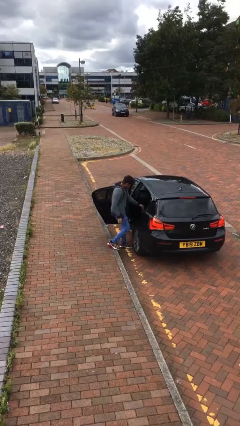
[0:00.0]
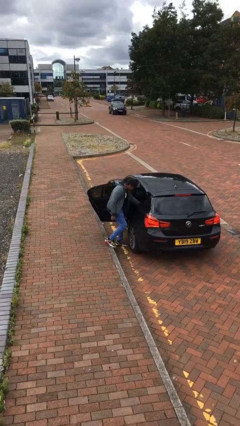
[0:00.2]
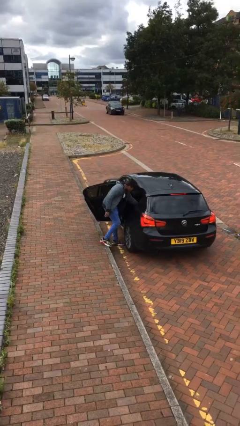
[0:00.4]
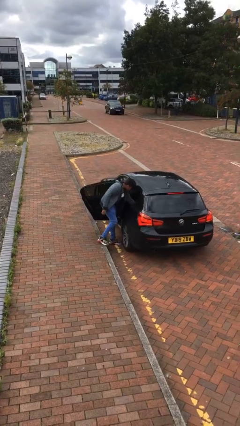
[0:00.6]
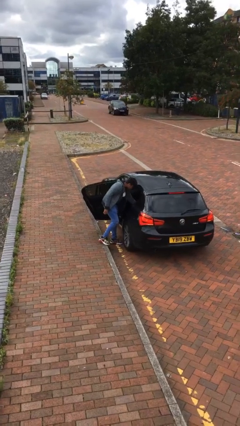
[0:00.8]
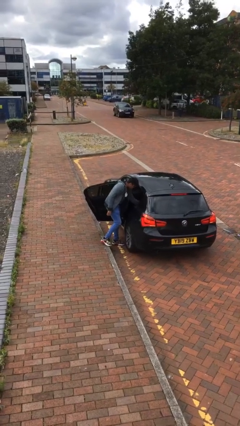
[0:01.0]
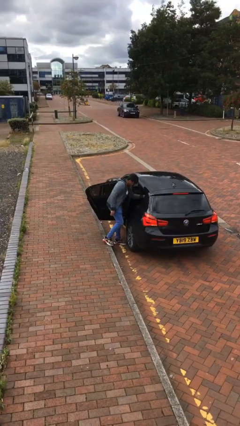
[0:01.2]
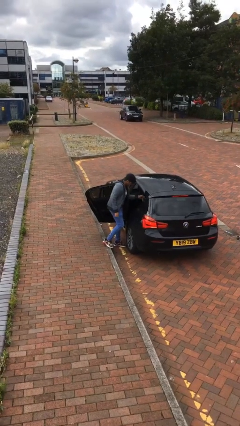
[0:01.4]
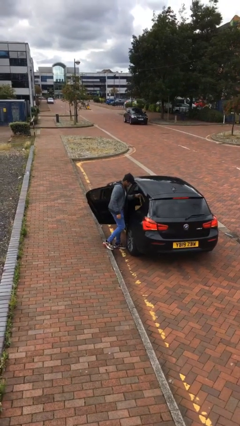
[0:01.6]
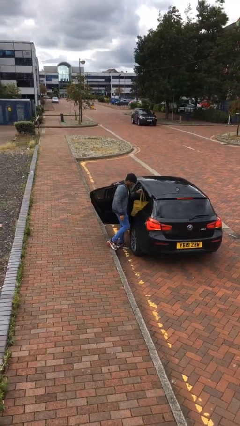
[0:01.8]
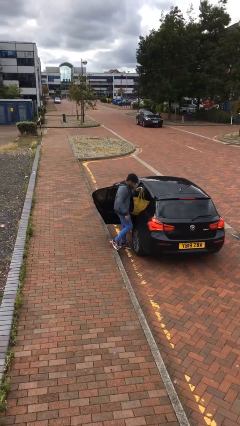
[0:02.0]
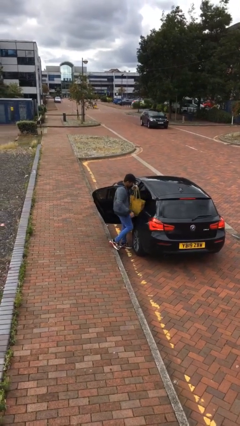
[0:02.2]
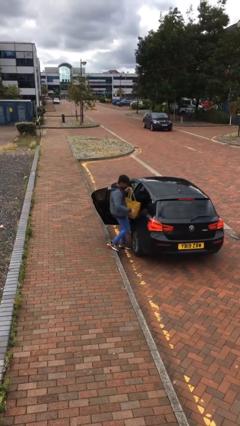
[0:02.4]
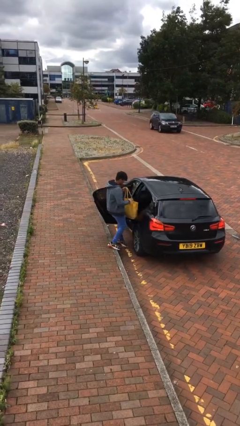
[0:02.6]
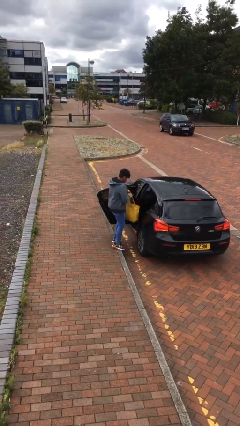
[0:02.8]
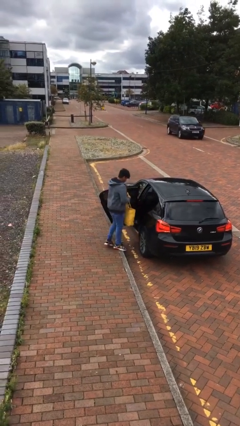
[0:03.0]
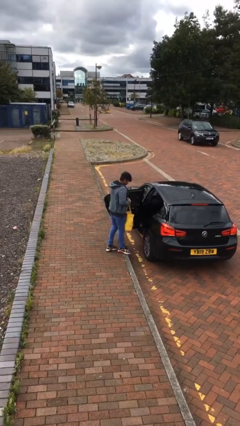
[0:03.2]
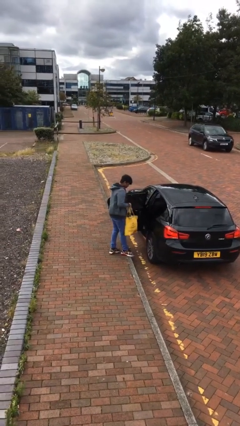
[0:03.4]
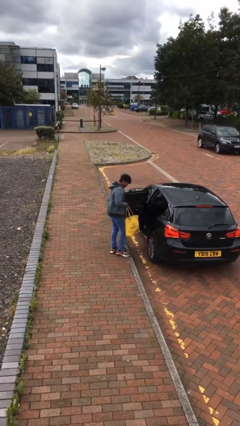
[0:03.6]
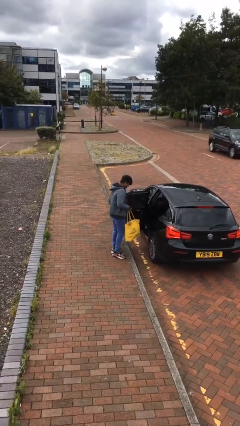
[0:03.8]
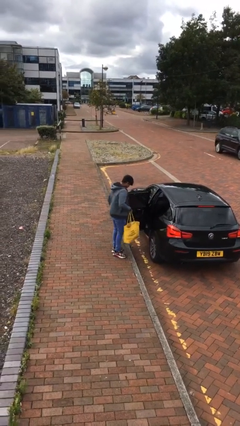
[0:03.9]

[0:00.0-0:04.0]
person unloads car

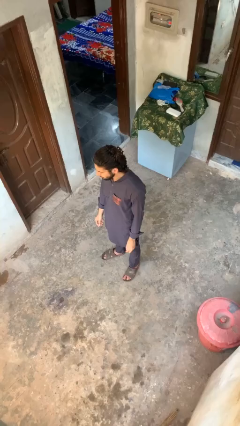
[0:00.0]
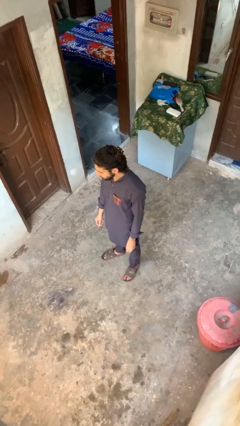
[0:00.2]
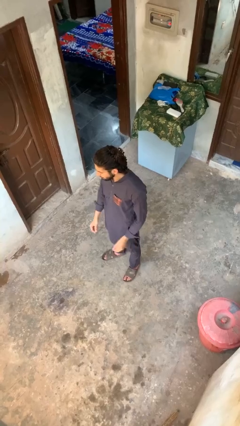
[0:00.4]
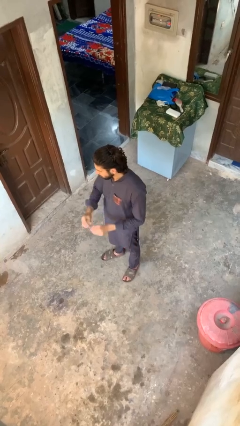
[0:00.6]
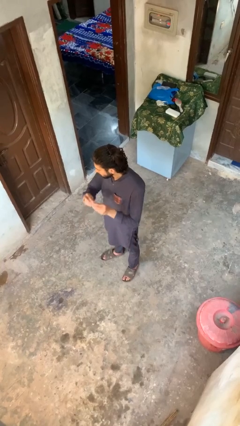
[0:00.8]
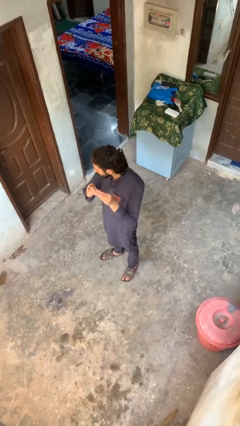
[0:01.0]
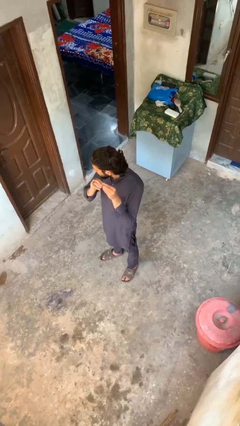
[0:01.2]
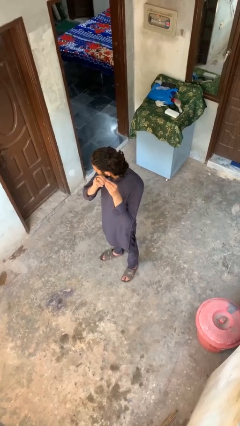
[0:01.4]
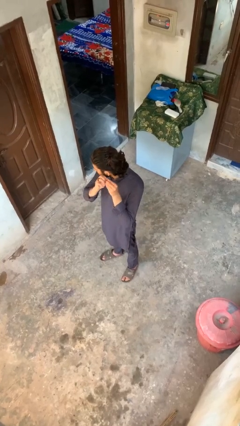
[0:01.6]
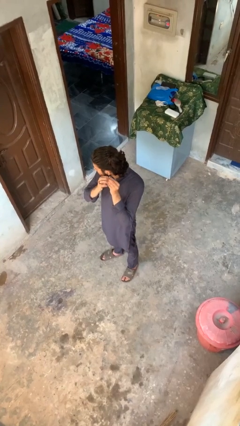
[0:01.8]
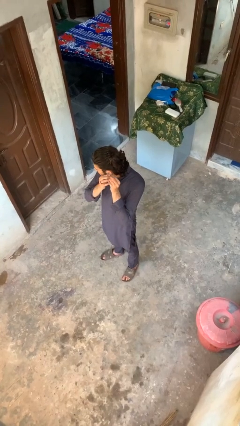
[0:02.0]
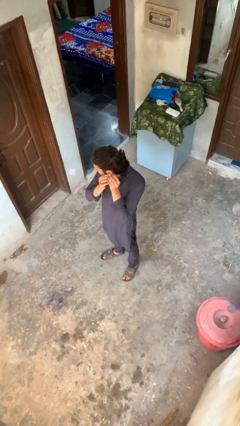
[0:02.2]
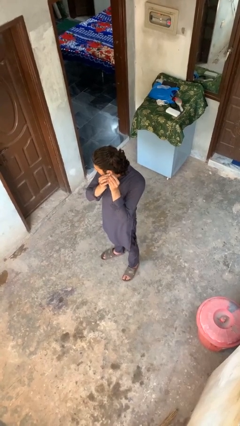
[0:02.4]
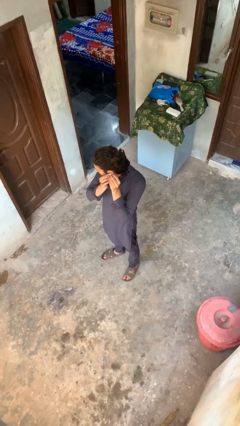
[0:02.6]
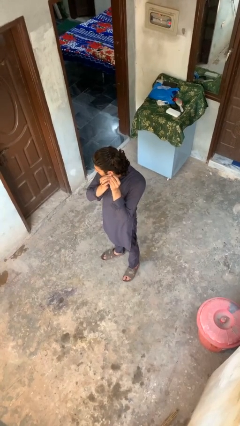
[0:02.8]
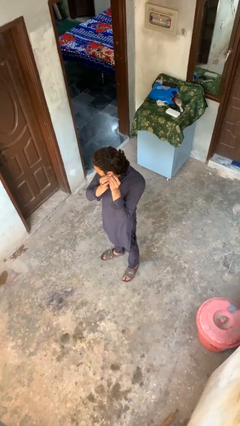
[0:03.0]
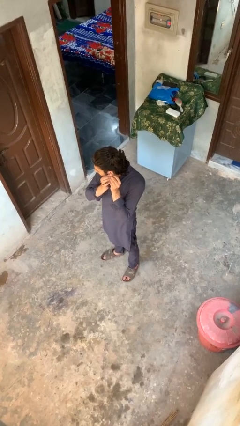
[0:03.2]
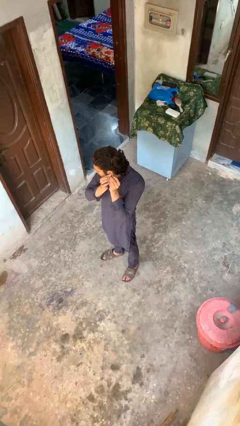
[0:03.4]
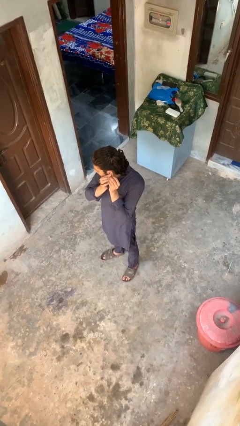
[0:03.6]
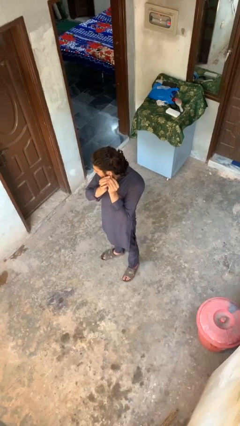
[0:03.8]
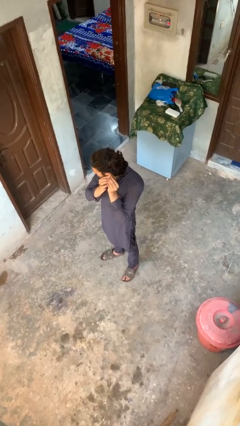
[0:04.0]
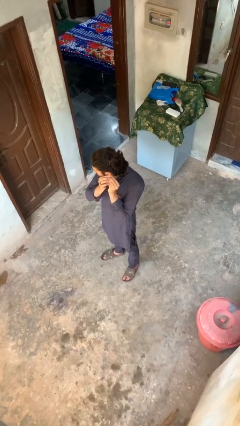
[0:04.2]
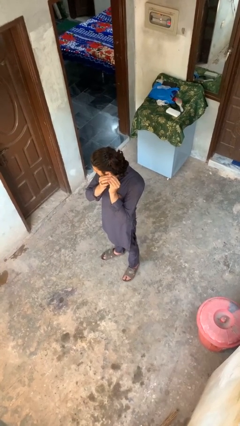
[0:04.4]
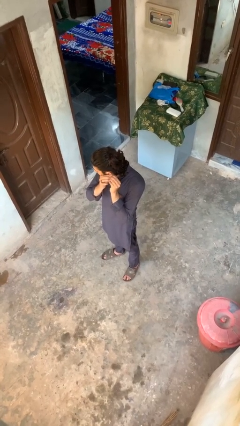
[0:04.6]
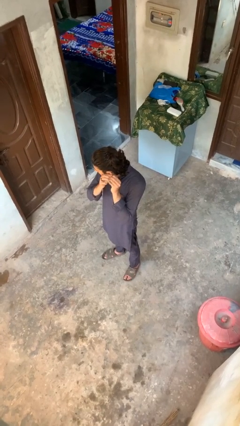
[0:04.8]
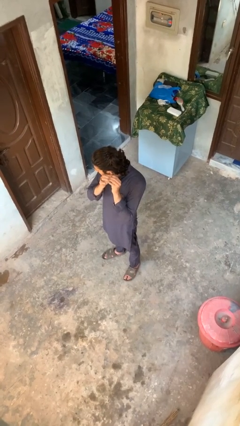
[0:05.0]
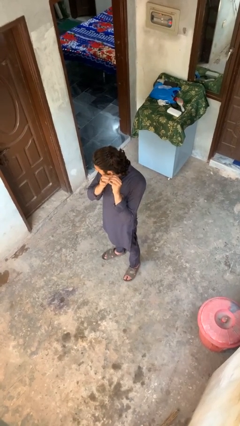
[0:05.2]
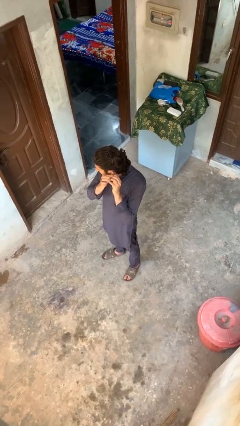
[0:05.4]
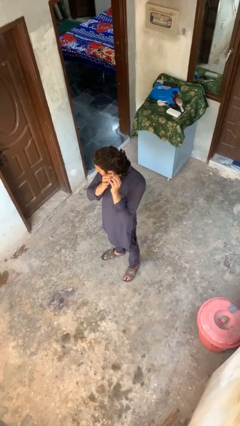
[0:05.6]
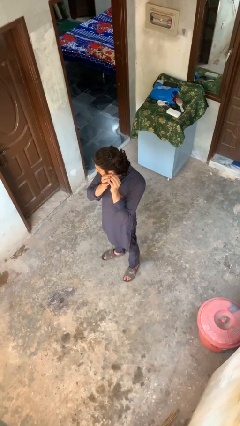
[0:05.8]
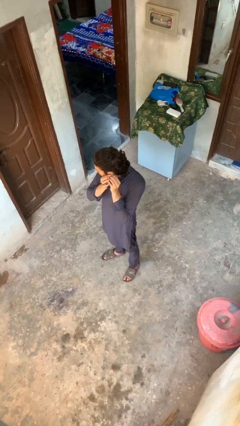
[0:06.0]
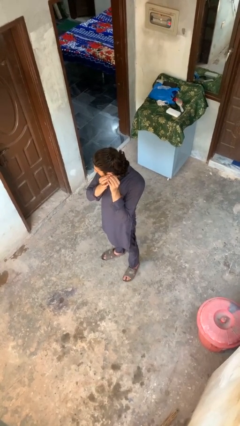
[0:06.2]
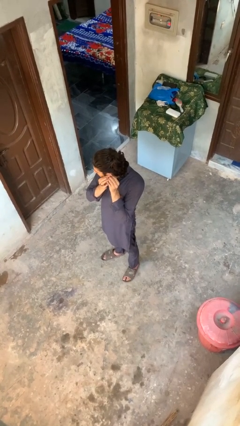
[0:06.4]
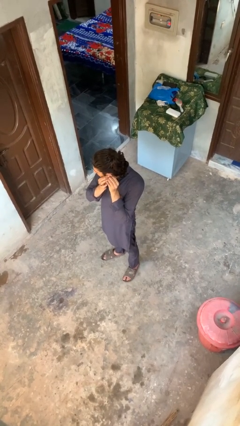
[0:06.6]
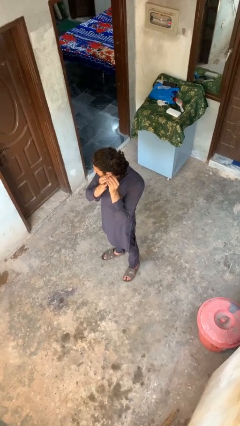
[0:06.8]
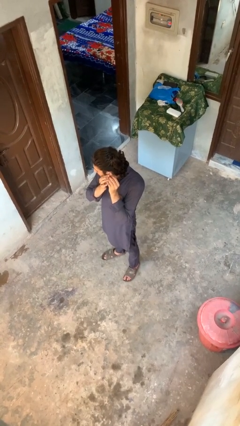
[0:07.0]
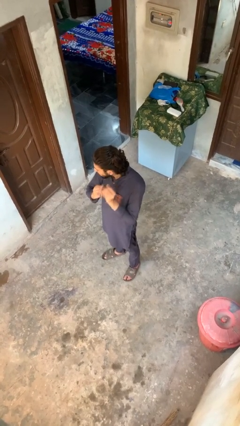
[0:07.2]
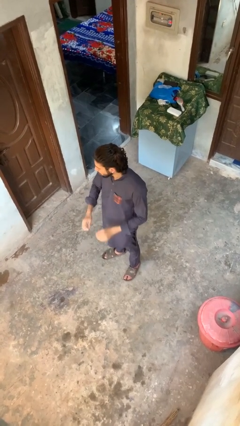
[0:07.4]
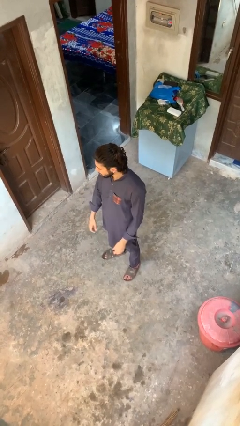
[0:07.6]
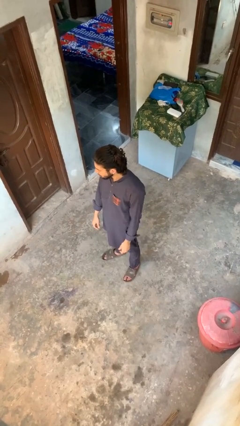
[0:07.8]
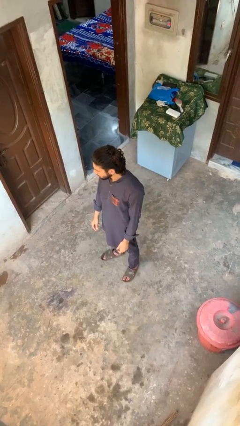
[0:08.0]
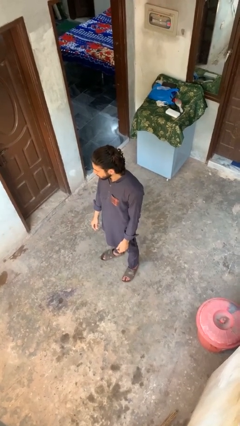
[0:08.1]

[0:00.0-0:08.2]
person puts on earrings

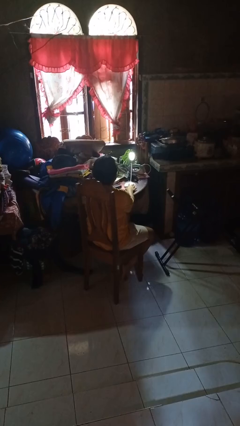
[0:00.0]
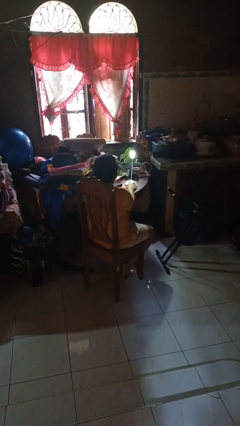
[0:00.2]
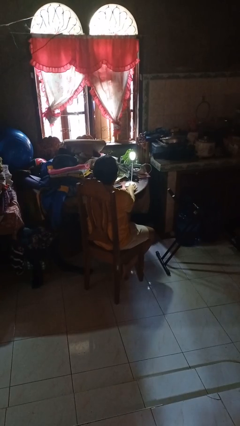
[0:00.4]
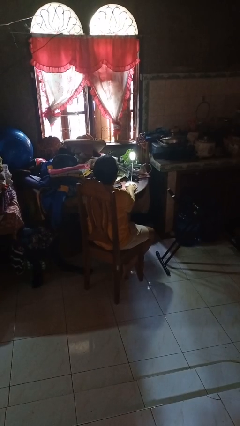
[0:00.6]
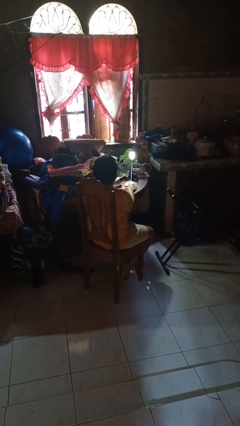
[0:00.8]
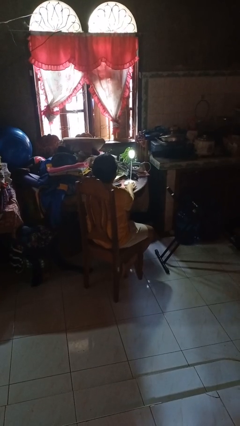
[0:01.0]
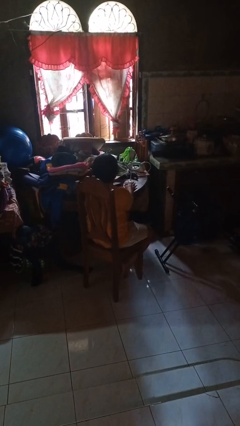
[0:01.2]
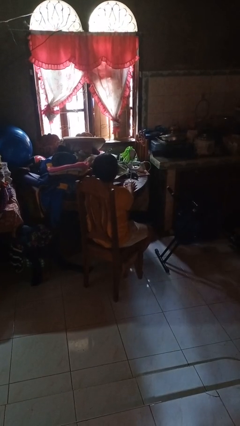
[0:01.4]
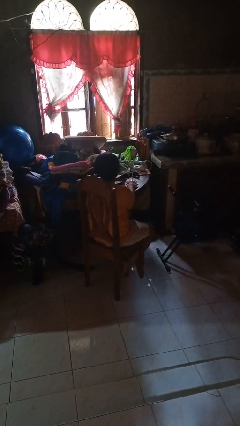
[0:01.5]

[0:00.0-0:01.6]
person turns off lamp

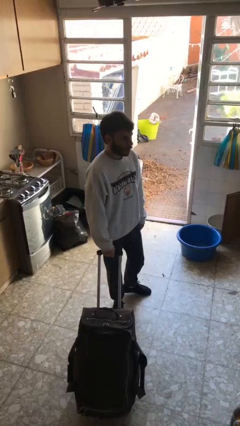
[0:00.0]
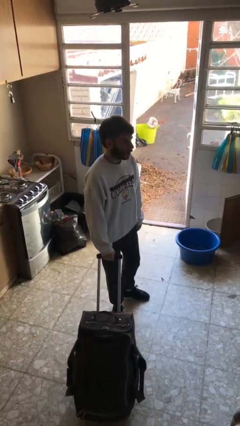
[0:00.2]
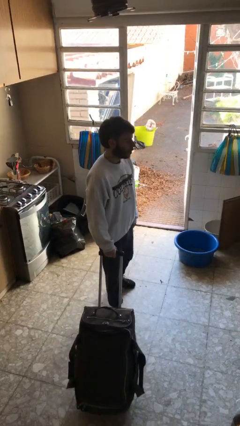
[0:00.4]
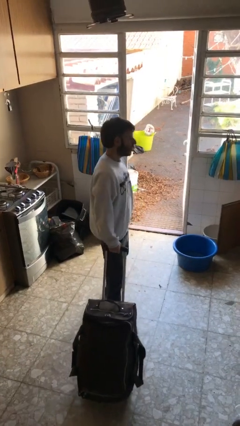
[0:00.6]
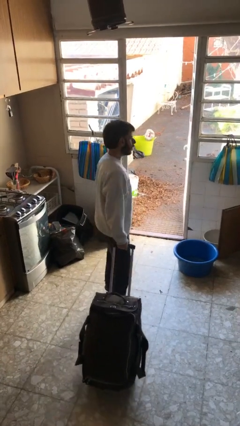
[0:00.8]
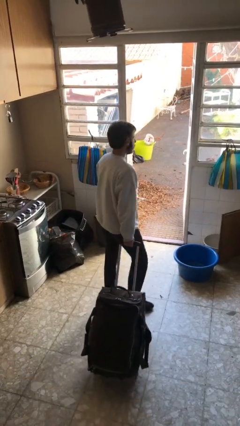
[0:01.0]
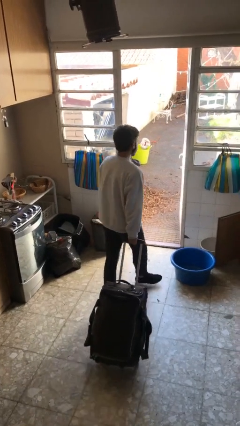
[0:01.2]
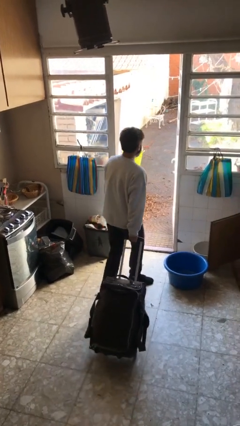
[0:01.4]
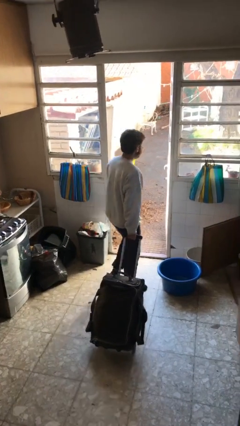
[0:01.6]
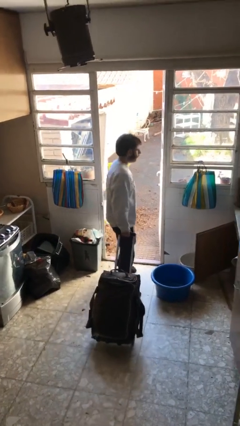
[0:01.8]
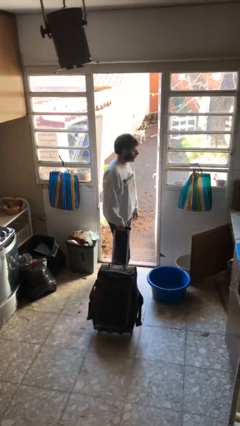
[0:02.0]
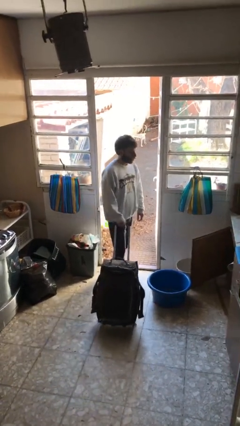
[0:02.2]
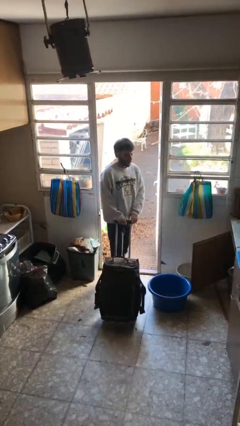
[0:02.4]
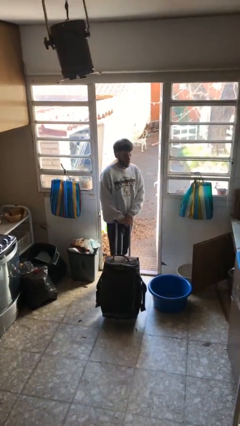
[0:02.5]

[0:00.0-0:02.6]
person pulls wheeled cart

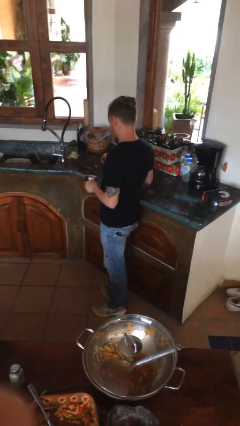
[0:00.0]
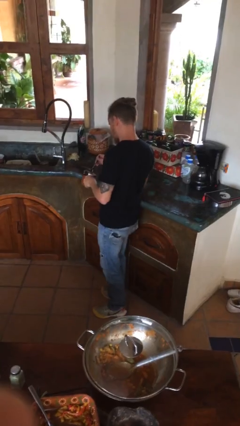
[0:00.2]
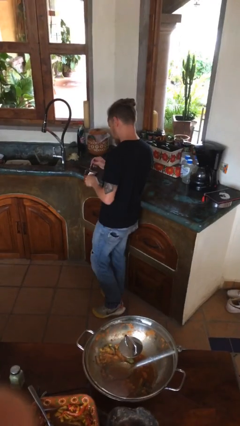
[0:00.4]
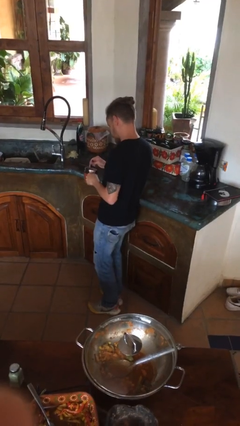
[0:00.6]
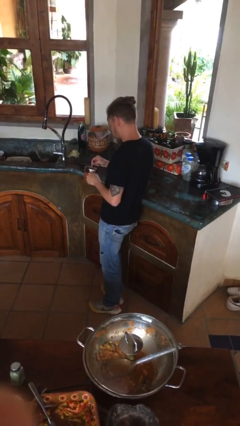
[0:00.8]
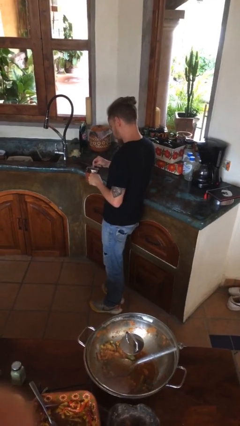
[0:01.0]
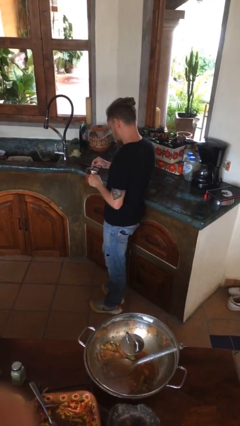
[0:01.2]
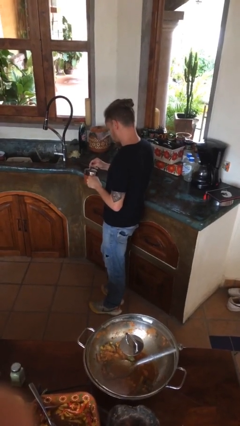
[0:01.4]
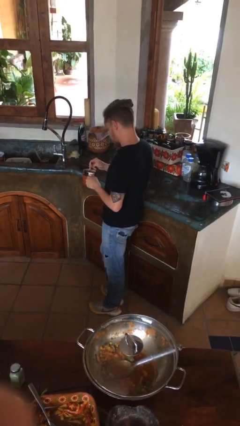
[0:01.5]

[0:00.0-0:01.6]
person stirs mug
